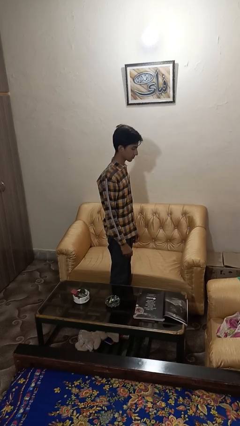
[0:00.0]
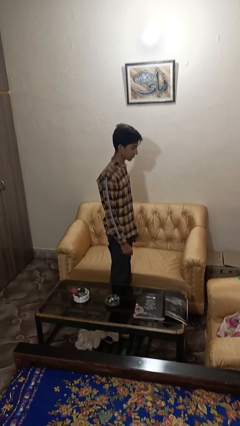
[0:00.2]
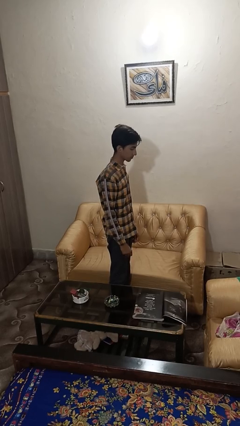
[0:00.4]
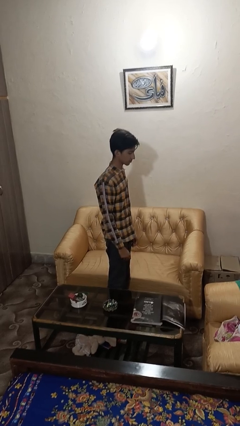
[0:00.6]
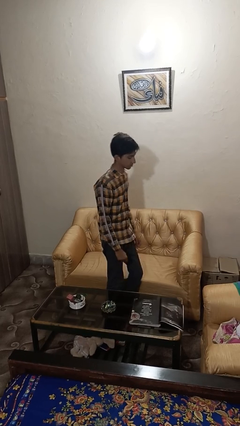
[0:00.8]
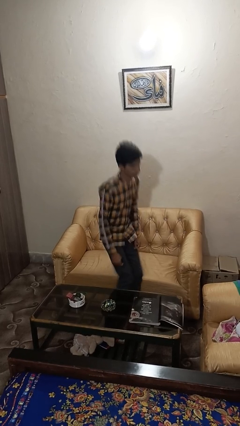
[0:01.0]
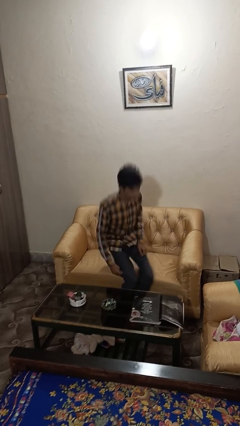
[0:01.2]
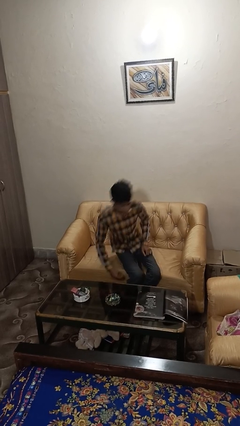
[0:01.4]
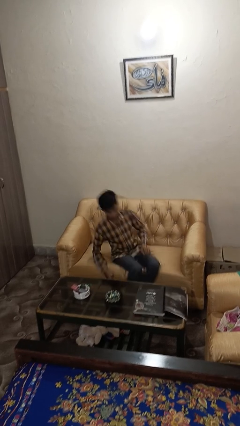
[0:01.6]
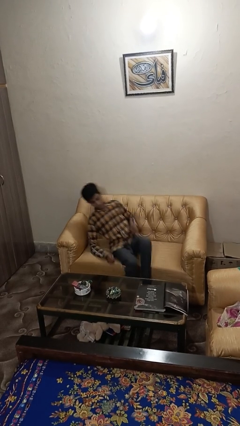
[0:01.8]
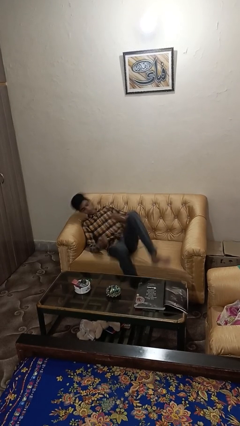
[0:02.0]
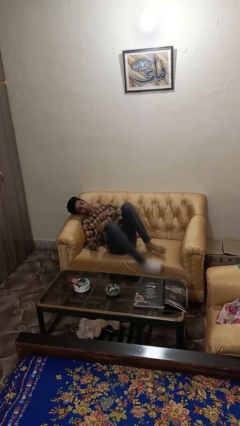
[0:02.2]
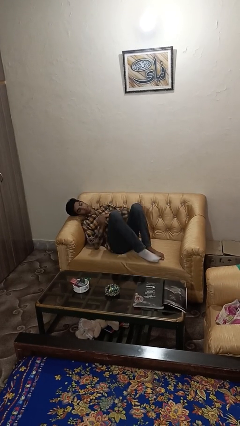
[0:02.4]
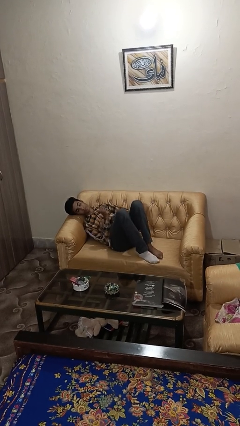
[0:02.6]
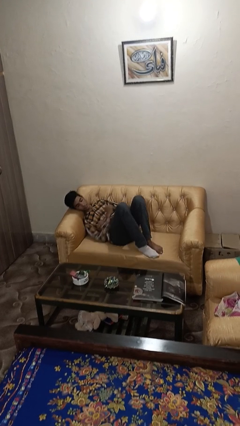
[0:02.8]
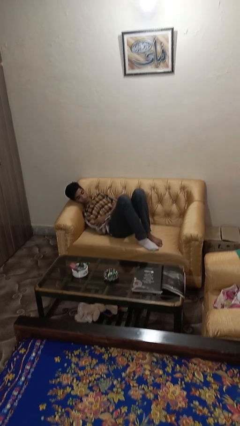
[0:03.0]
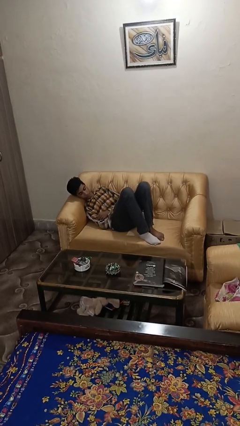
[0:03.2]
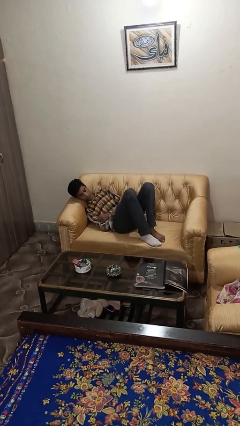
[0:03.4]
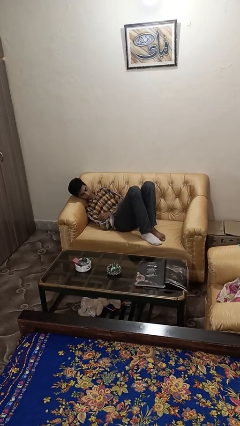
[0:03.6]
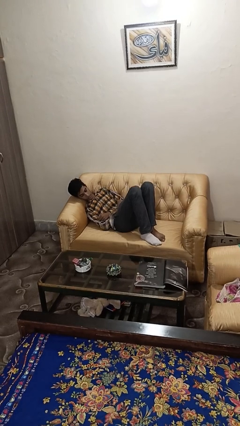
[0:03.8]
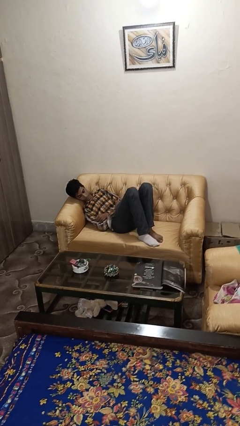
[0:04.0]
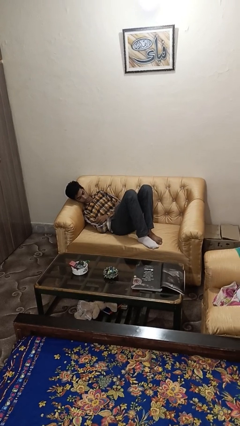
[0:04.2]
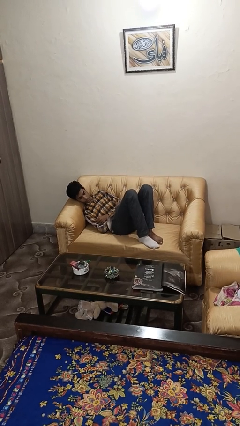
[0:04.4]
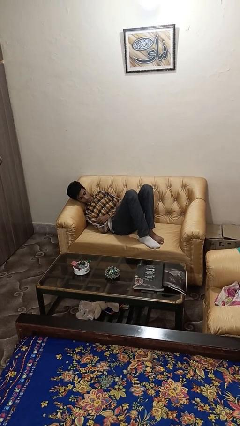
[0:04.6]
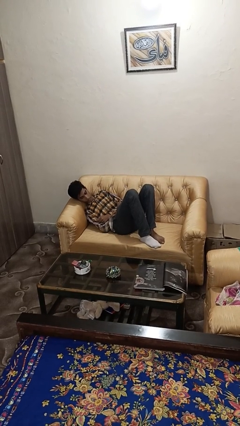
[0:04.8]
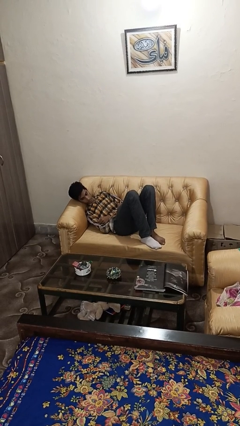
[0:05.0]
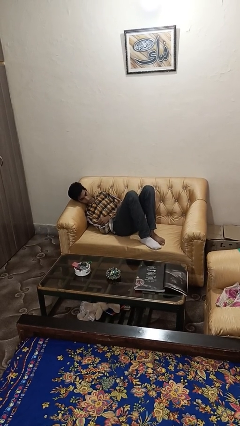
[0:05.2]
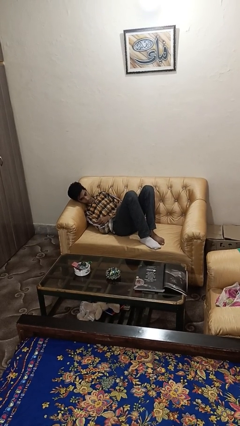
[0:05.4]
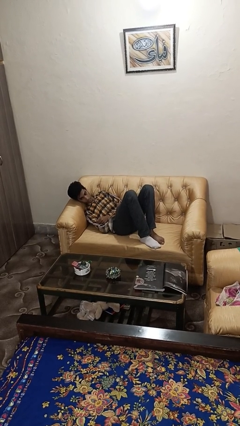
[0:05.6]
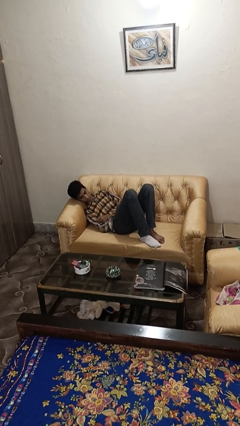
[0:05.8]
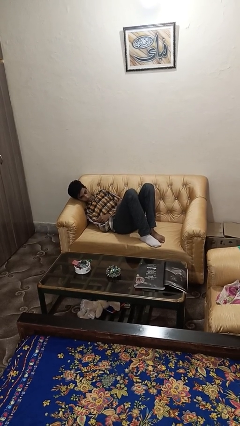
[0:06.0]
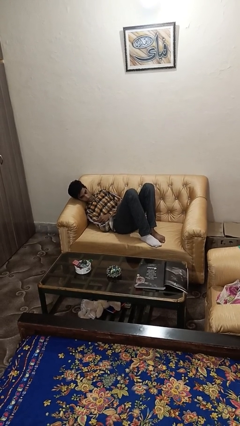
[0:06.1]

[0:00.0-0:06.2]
person lies down on couch

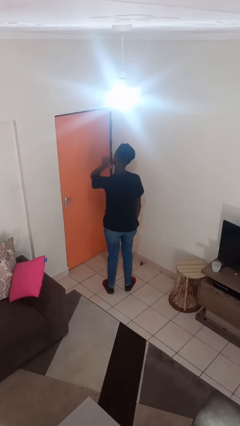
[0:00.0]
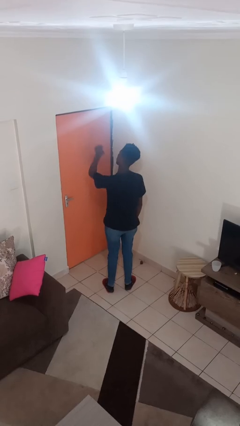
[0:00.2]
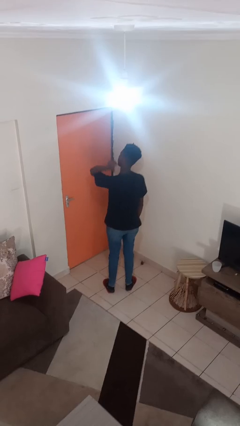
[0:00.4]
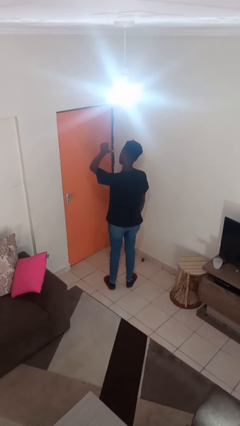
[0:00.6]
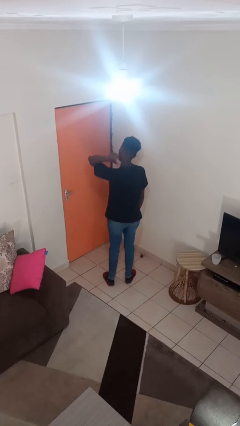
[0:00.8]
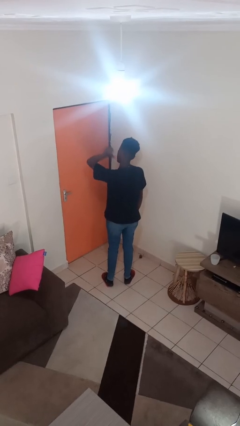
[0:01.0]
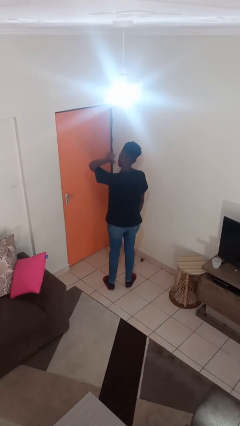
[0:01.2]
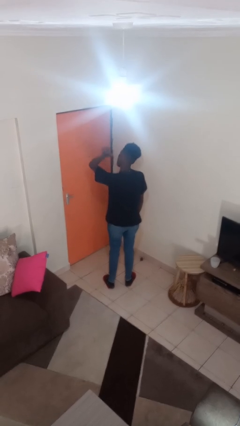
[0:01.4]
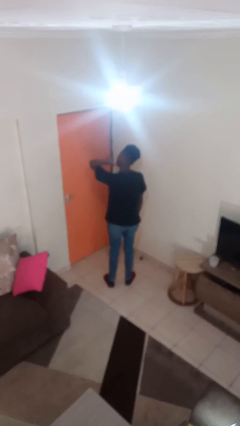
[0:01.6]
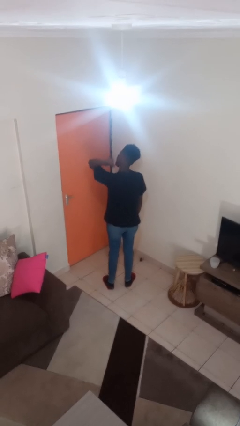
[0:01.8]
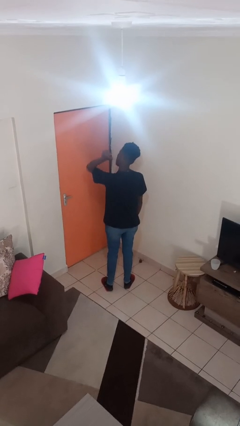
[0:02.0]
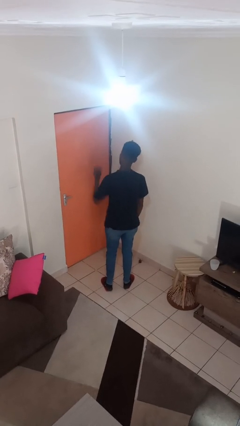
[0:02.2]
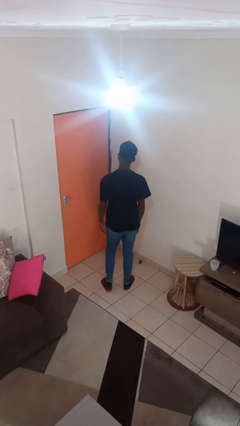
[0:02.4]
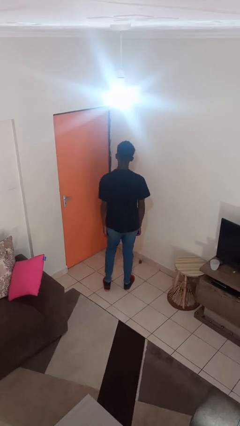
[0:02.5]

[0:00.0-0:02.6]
person gestures behind me

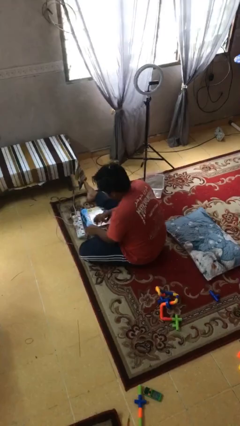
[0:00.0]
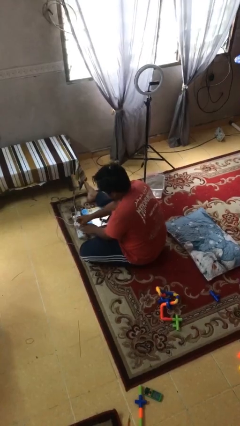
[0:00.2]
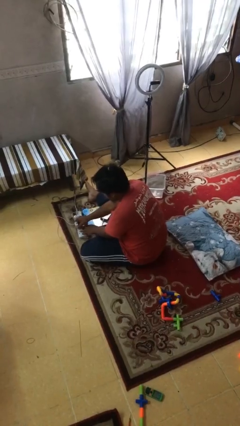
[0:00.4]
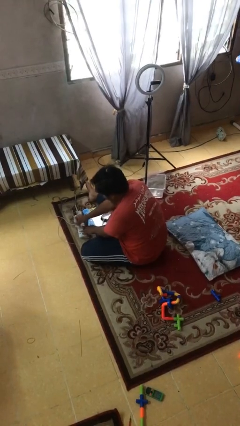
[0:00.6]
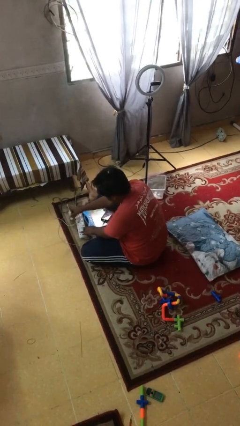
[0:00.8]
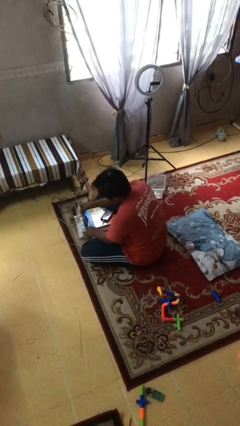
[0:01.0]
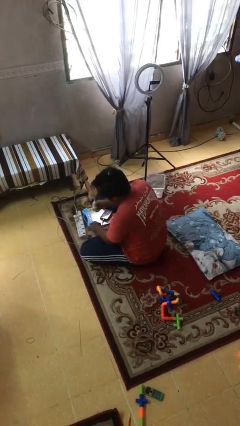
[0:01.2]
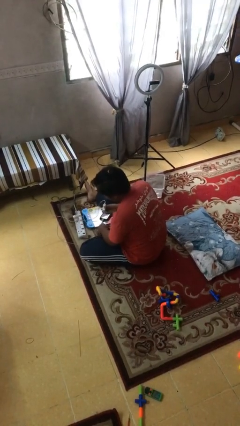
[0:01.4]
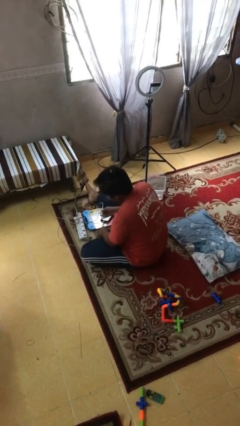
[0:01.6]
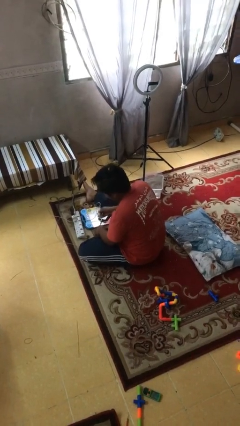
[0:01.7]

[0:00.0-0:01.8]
person unplugs from electrical socket

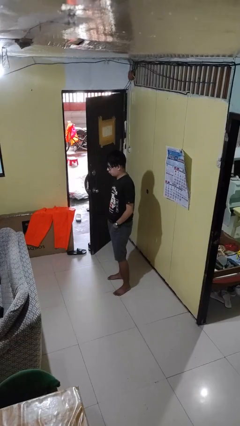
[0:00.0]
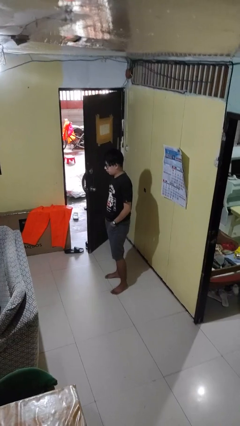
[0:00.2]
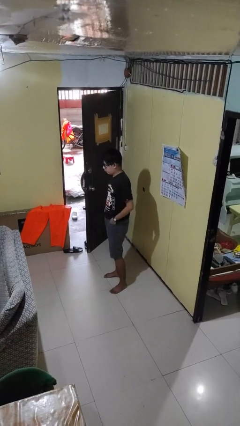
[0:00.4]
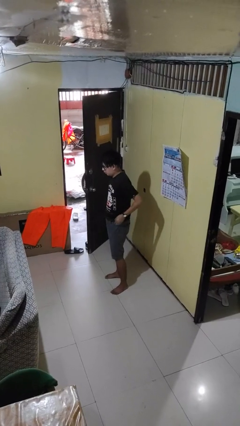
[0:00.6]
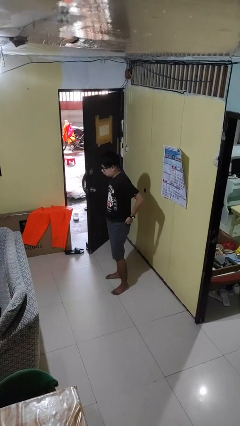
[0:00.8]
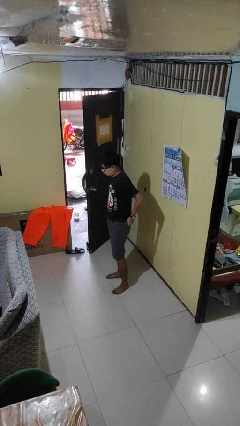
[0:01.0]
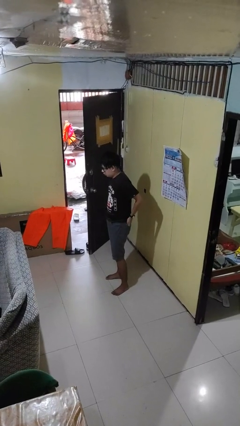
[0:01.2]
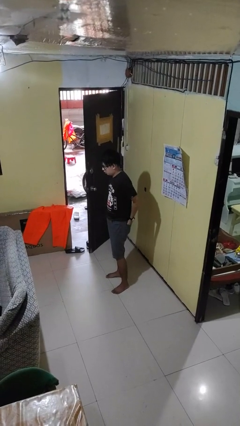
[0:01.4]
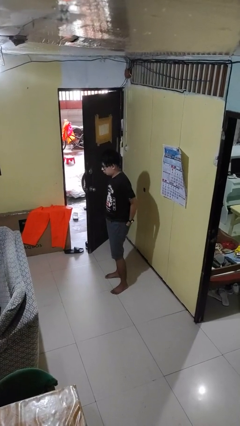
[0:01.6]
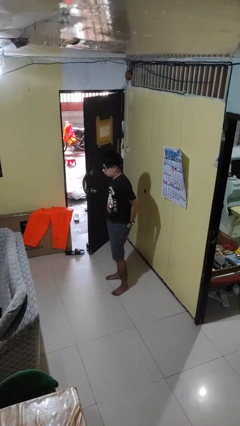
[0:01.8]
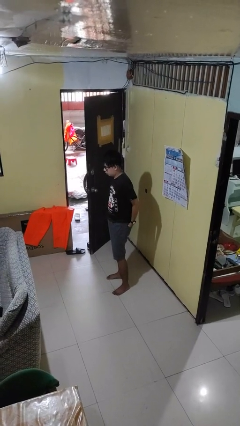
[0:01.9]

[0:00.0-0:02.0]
person puts hands in back pockets

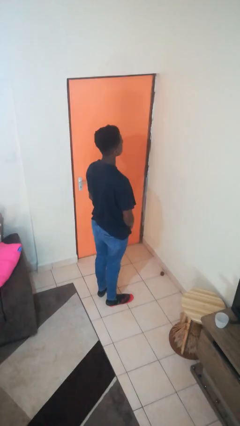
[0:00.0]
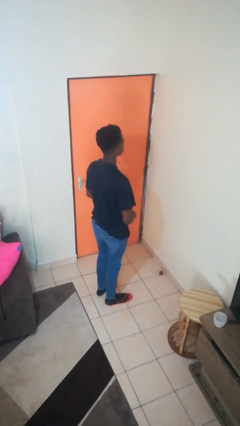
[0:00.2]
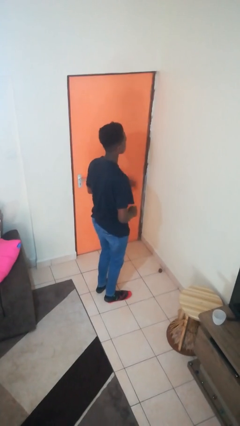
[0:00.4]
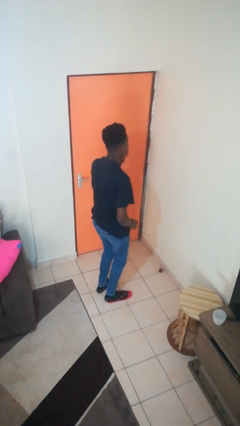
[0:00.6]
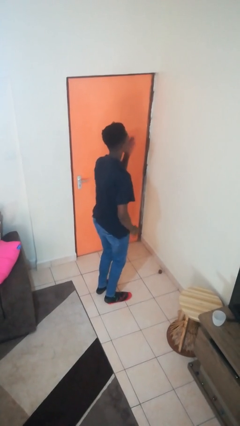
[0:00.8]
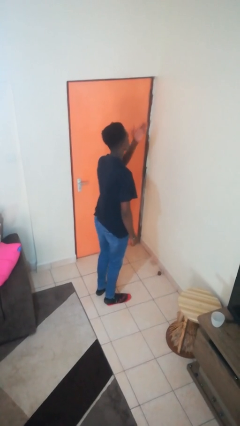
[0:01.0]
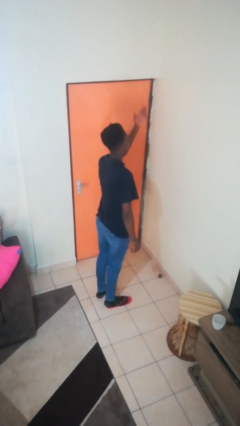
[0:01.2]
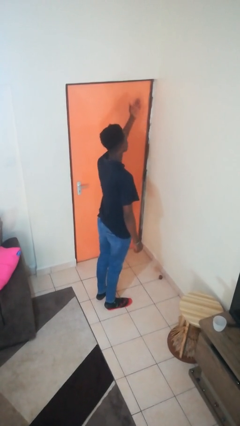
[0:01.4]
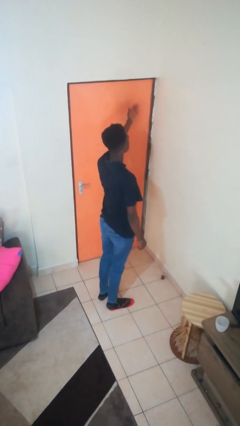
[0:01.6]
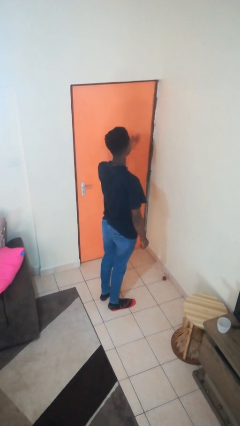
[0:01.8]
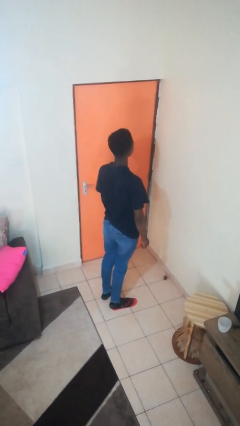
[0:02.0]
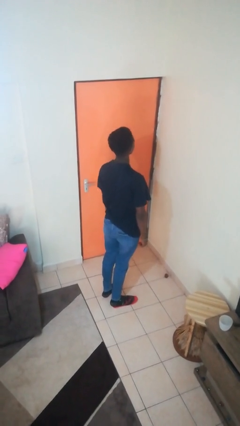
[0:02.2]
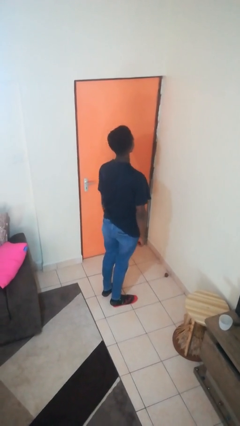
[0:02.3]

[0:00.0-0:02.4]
person gestures blow kiss

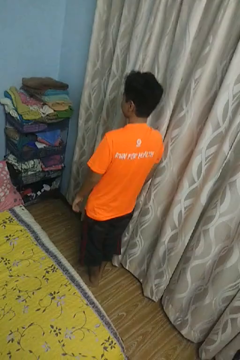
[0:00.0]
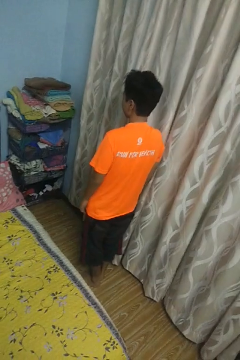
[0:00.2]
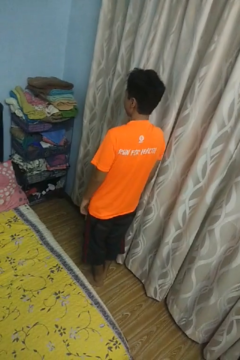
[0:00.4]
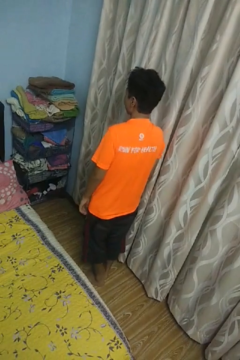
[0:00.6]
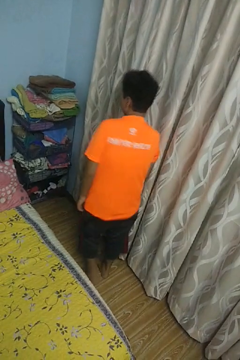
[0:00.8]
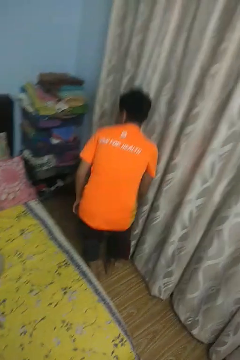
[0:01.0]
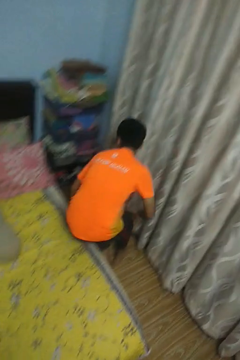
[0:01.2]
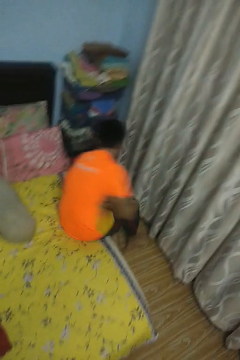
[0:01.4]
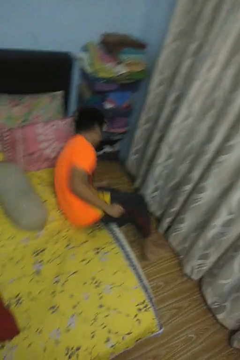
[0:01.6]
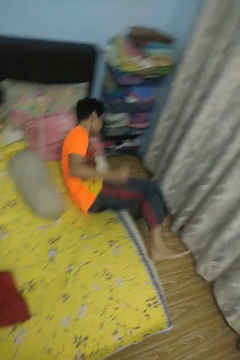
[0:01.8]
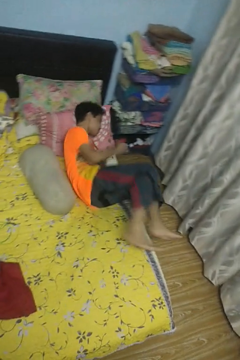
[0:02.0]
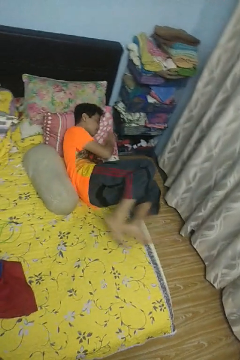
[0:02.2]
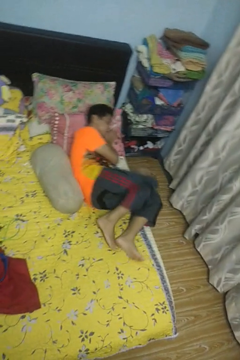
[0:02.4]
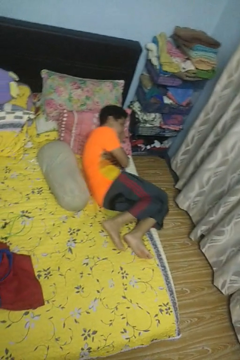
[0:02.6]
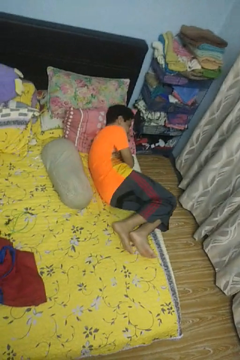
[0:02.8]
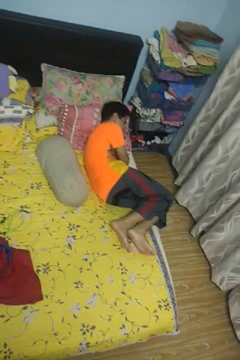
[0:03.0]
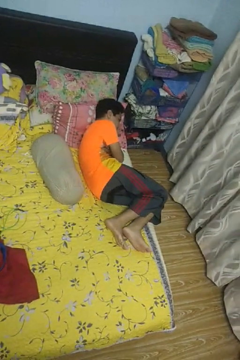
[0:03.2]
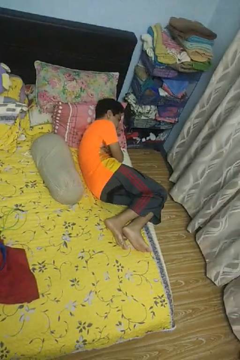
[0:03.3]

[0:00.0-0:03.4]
person lies down on bed
